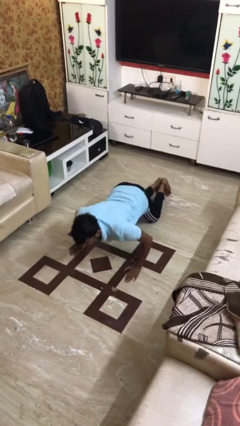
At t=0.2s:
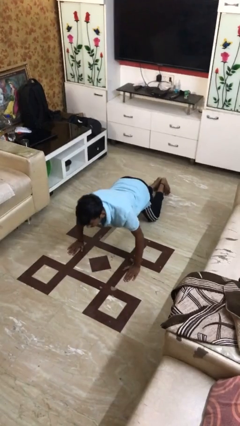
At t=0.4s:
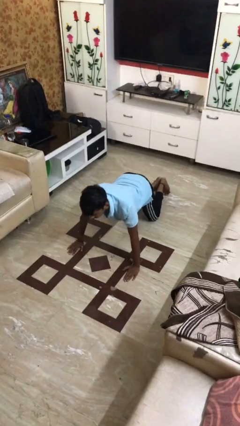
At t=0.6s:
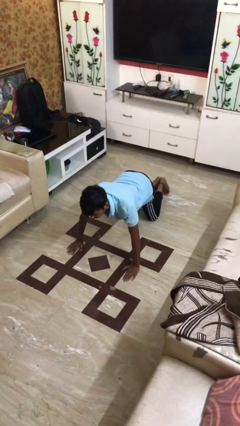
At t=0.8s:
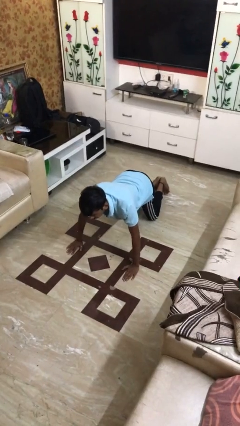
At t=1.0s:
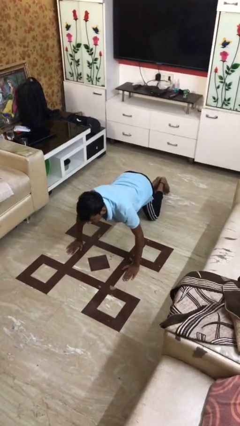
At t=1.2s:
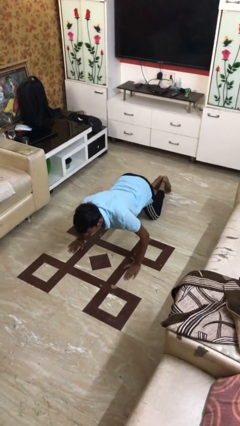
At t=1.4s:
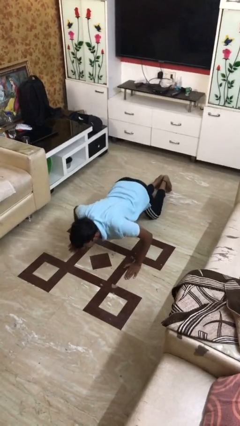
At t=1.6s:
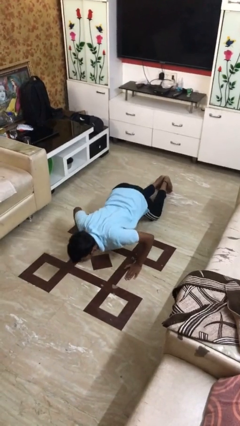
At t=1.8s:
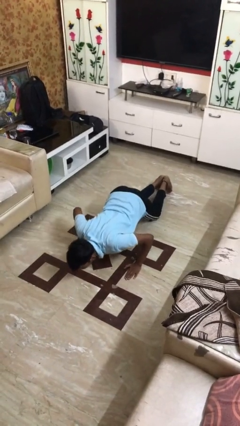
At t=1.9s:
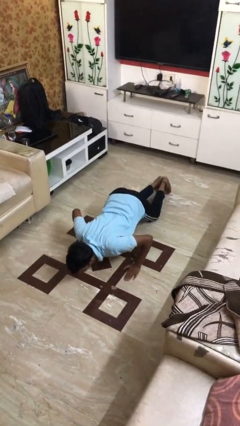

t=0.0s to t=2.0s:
person exercises with pushup

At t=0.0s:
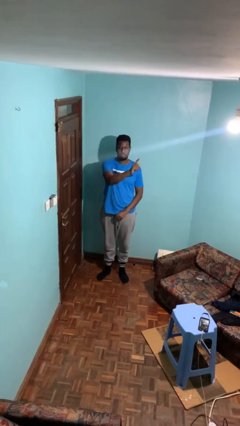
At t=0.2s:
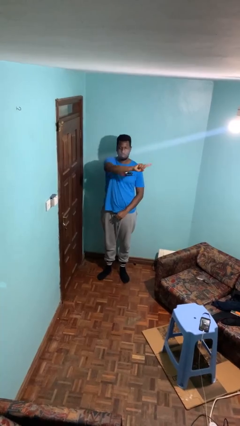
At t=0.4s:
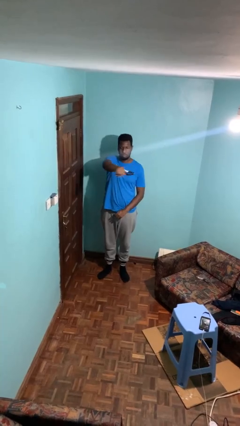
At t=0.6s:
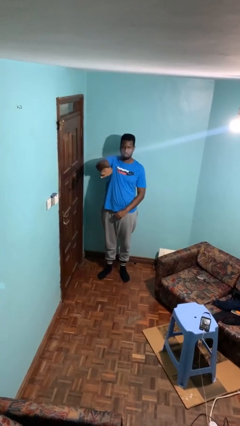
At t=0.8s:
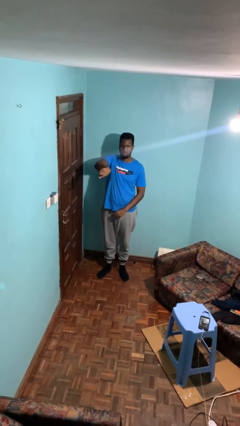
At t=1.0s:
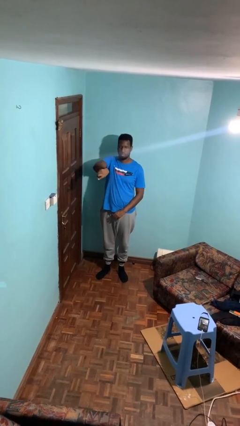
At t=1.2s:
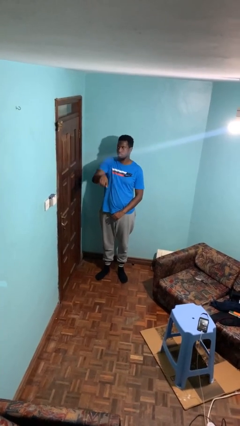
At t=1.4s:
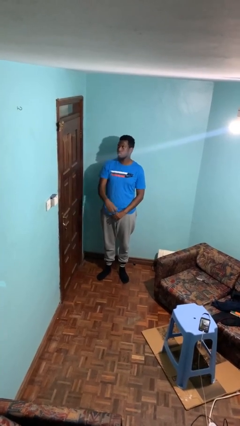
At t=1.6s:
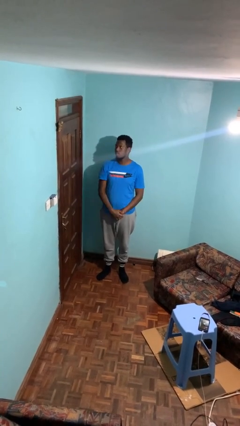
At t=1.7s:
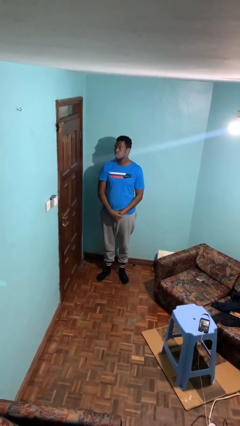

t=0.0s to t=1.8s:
person gestures swipe right

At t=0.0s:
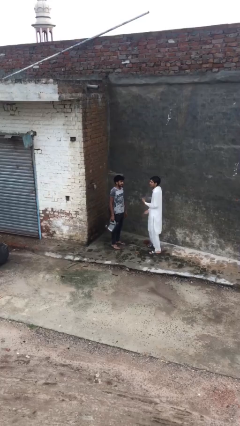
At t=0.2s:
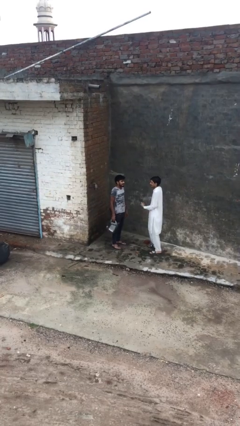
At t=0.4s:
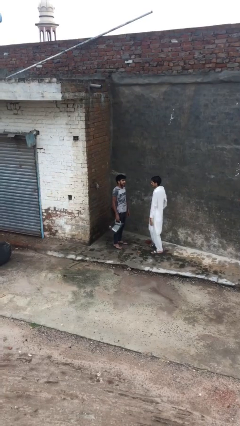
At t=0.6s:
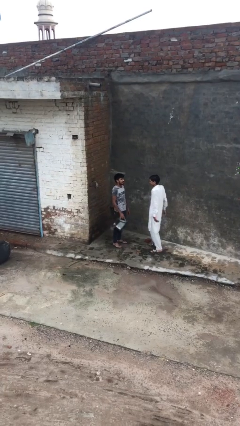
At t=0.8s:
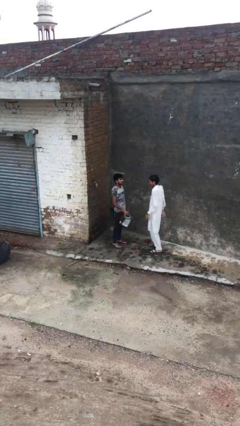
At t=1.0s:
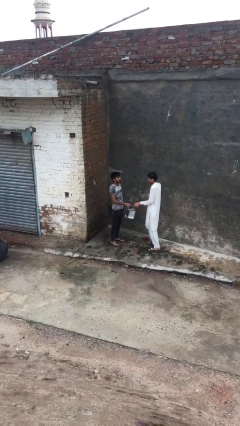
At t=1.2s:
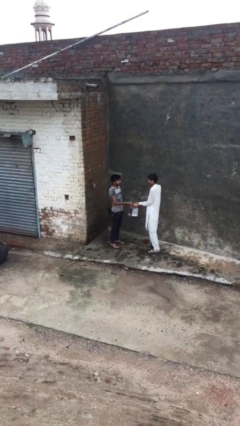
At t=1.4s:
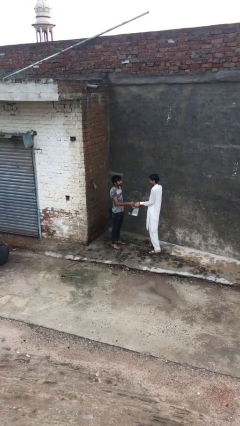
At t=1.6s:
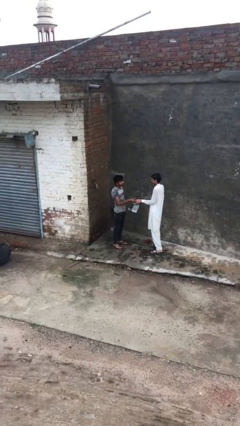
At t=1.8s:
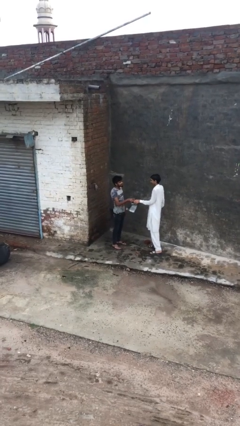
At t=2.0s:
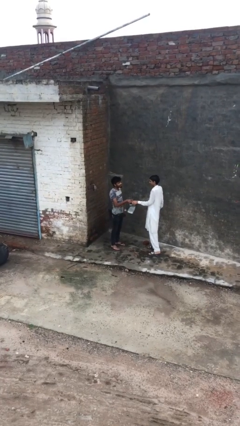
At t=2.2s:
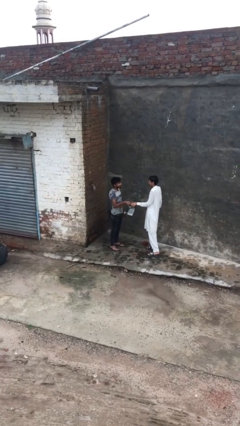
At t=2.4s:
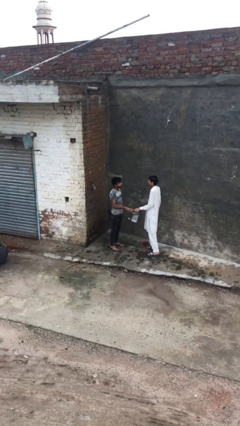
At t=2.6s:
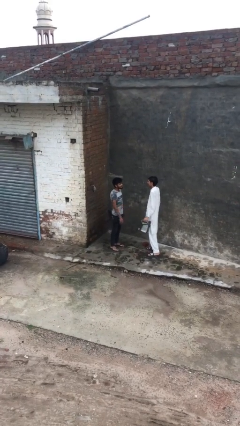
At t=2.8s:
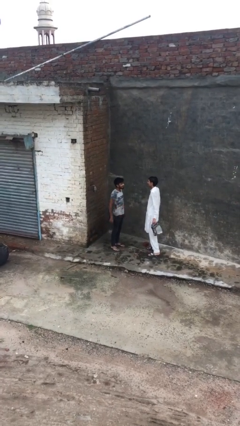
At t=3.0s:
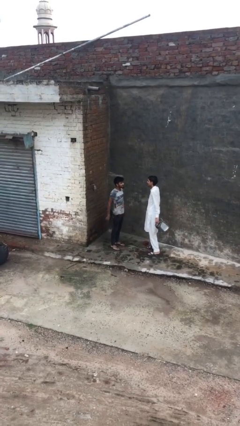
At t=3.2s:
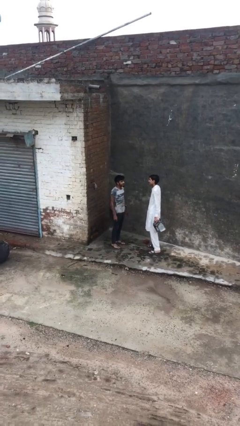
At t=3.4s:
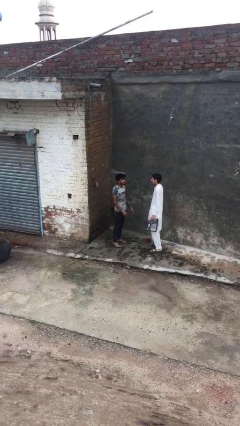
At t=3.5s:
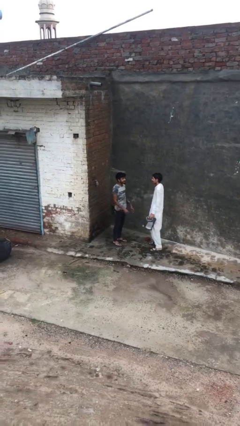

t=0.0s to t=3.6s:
person transfers object to person

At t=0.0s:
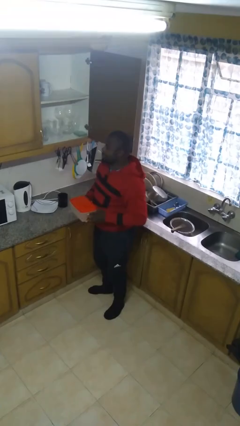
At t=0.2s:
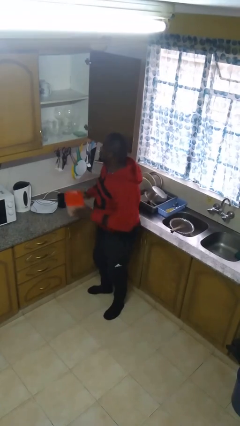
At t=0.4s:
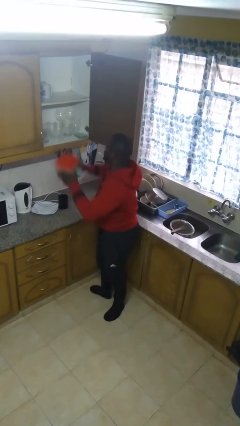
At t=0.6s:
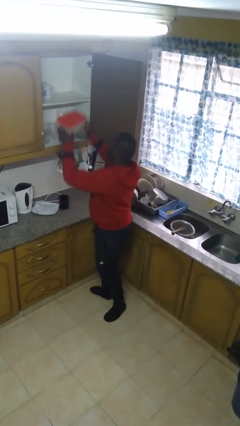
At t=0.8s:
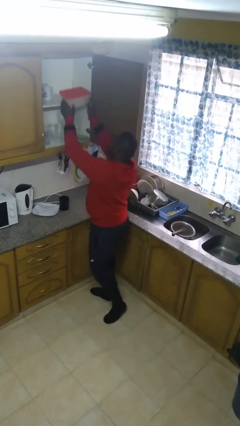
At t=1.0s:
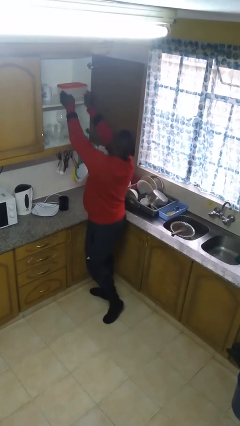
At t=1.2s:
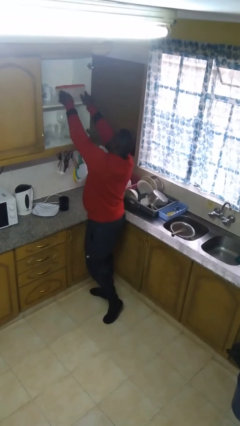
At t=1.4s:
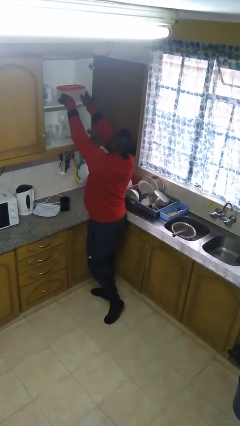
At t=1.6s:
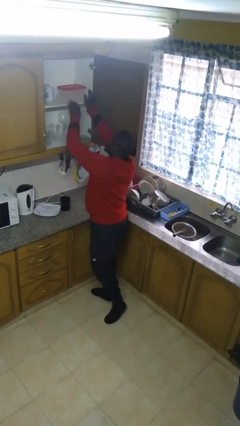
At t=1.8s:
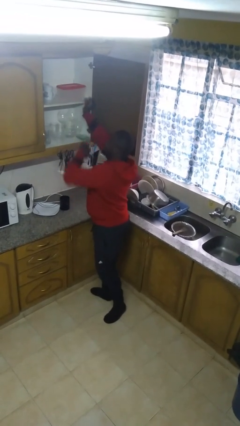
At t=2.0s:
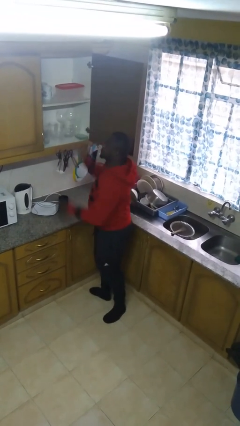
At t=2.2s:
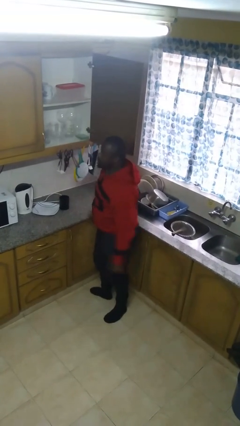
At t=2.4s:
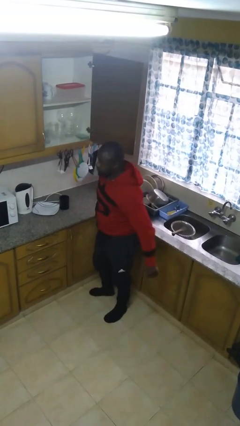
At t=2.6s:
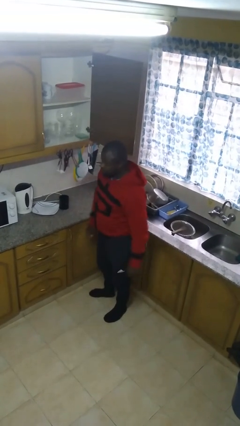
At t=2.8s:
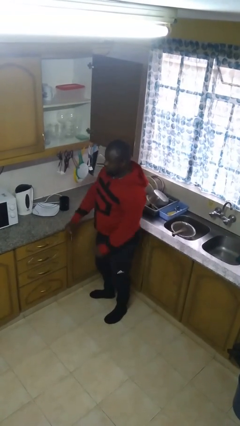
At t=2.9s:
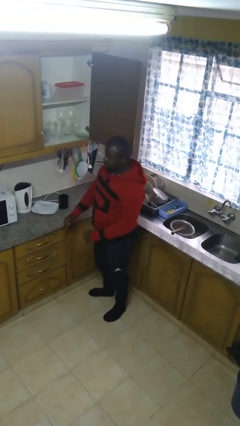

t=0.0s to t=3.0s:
person puts down object into cabinet

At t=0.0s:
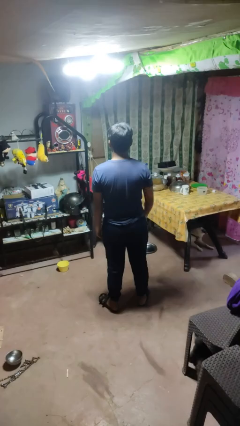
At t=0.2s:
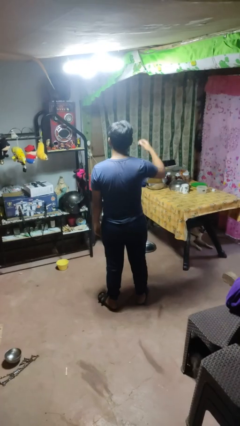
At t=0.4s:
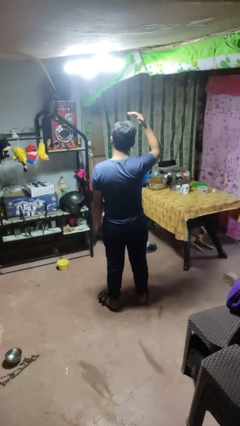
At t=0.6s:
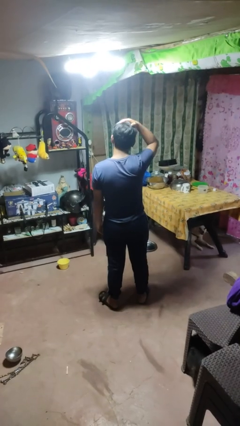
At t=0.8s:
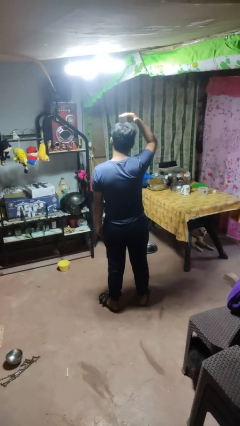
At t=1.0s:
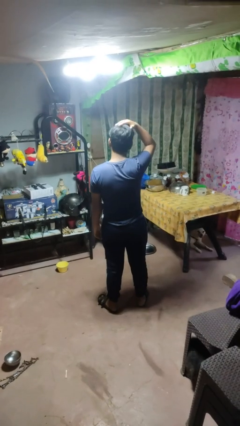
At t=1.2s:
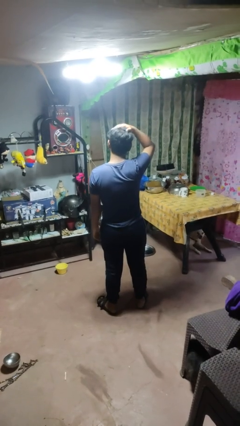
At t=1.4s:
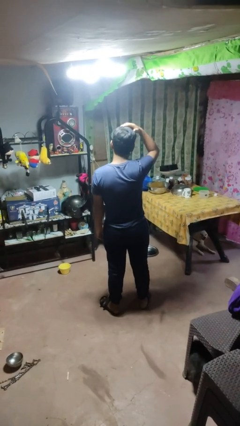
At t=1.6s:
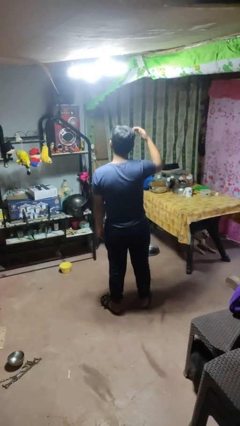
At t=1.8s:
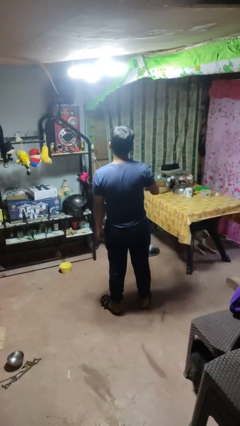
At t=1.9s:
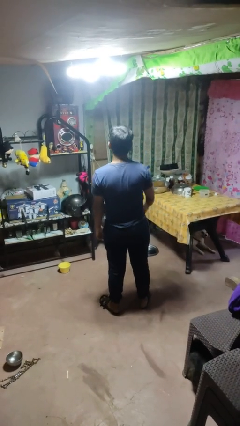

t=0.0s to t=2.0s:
person pats head

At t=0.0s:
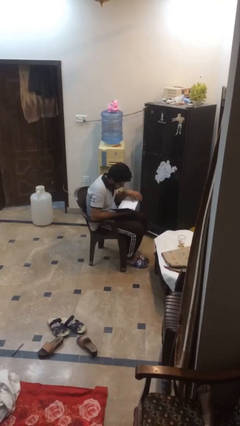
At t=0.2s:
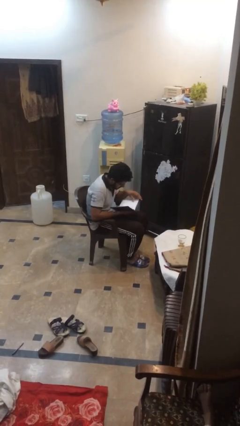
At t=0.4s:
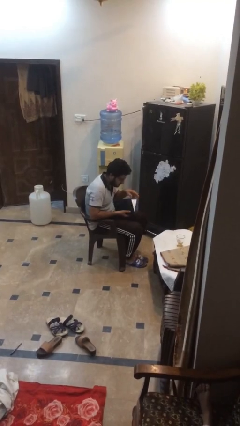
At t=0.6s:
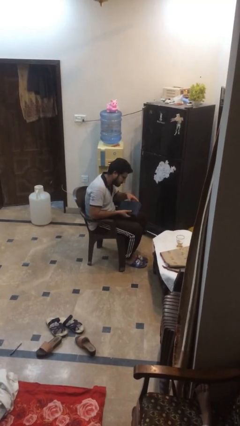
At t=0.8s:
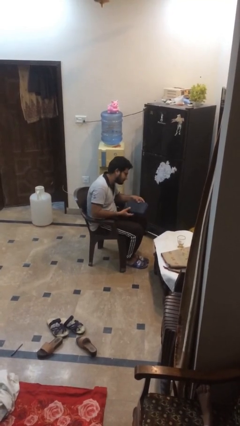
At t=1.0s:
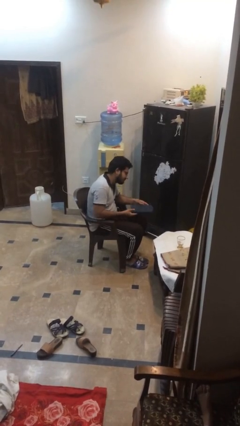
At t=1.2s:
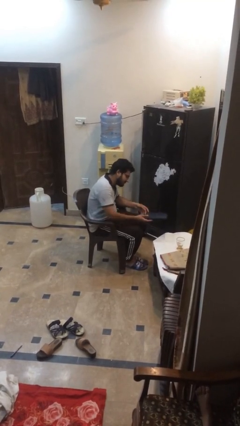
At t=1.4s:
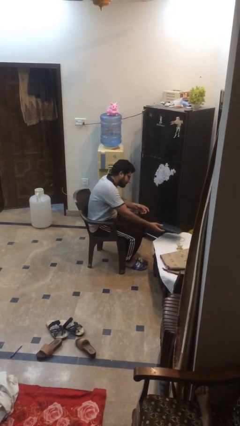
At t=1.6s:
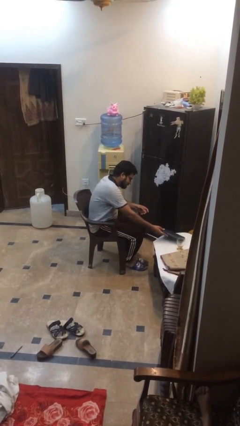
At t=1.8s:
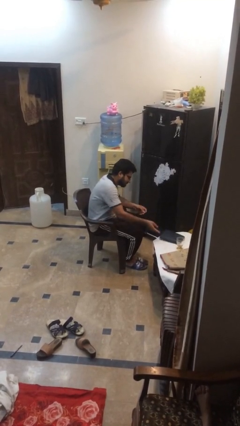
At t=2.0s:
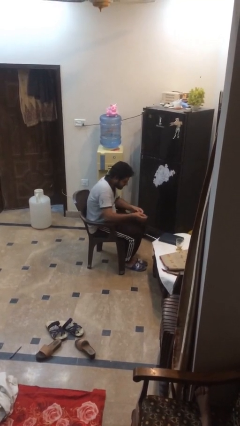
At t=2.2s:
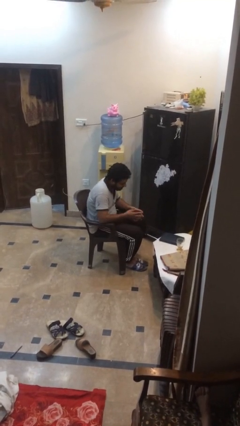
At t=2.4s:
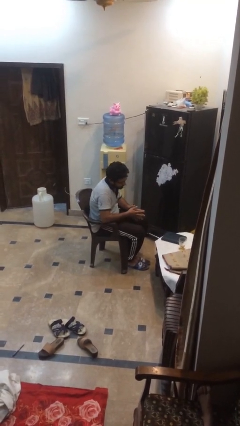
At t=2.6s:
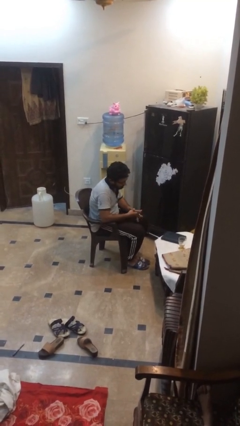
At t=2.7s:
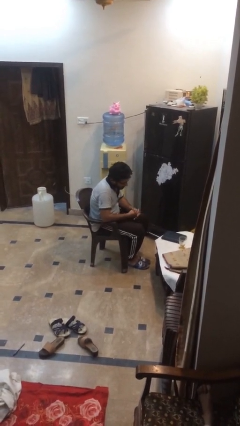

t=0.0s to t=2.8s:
person puts down object on table

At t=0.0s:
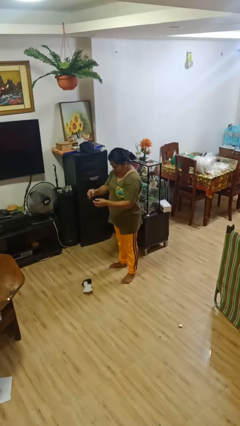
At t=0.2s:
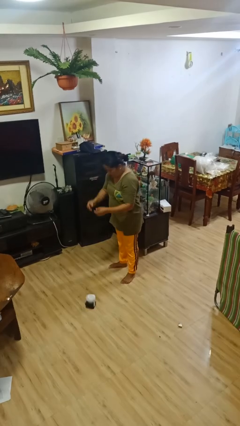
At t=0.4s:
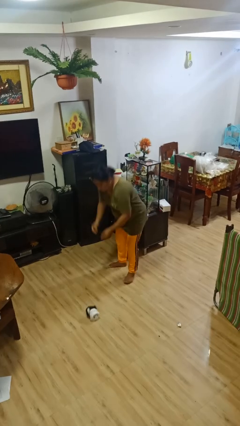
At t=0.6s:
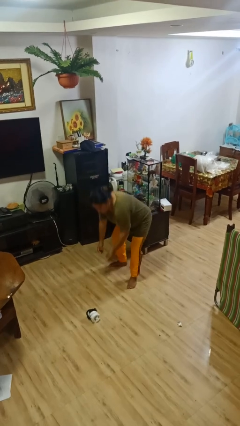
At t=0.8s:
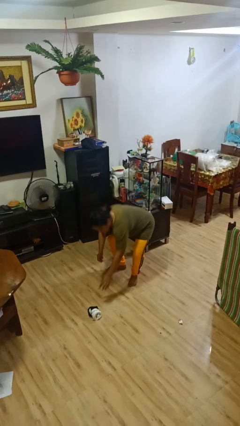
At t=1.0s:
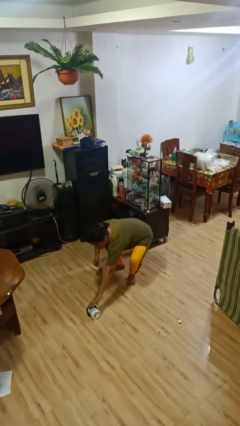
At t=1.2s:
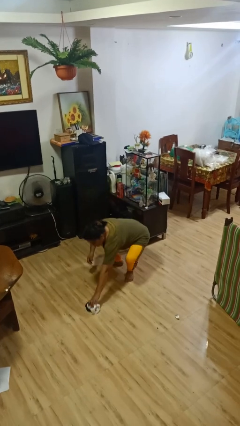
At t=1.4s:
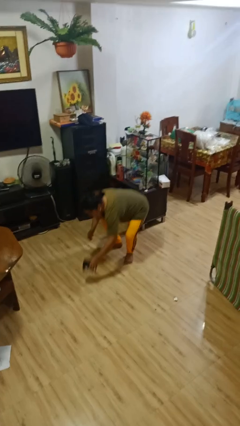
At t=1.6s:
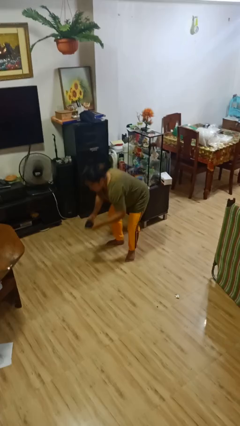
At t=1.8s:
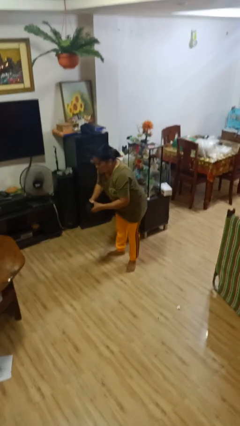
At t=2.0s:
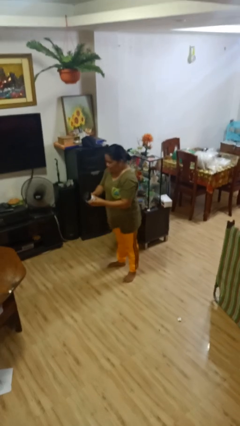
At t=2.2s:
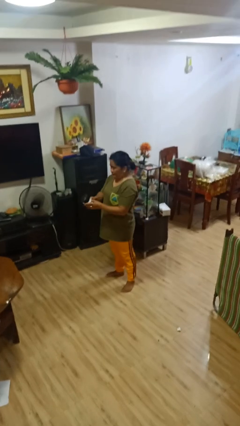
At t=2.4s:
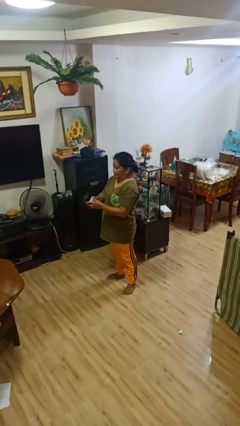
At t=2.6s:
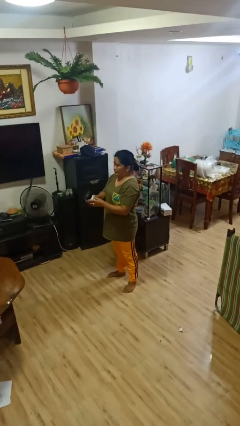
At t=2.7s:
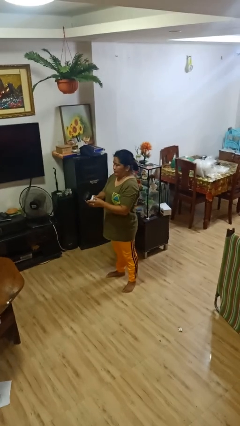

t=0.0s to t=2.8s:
person picks up object from floor
